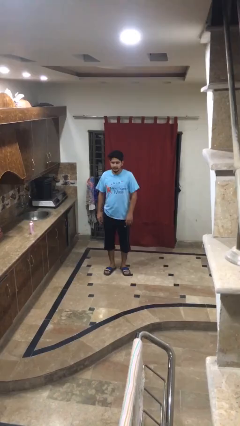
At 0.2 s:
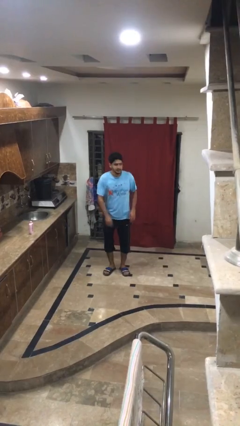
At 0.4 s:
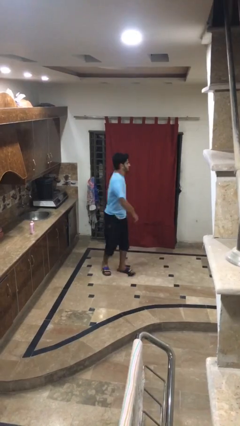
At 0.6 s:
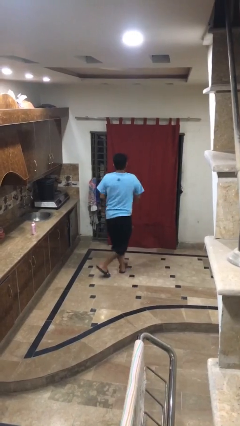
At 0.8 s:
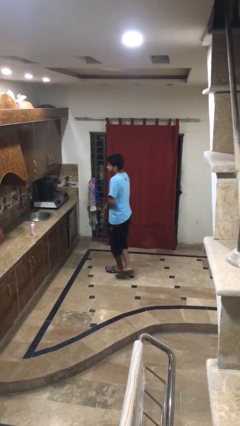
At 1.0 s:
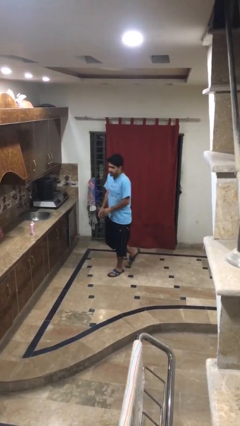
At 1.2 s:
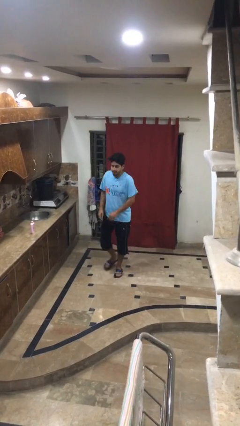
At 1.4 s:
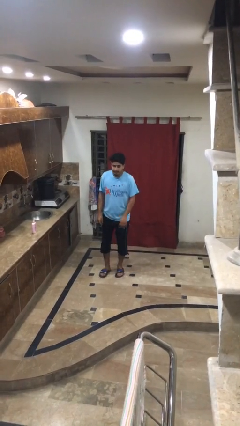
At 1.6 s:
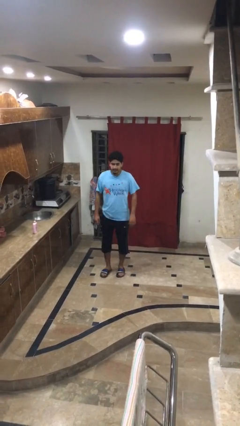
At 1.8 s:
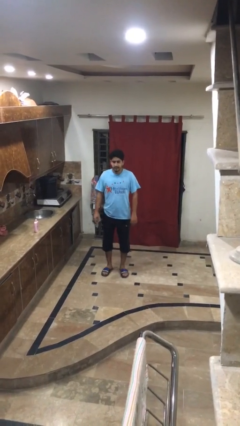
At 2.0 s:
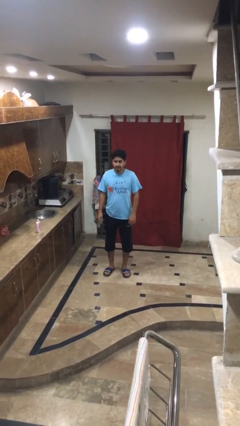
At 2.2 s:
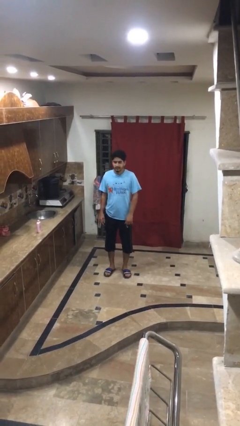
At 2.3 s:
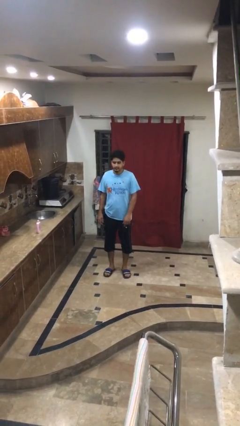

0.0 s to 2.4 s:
person twirls

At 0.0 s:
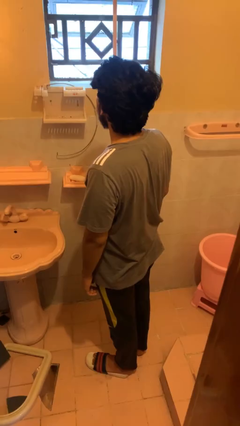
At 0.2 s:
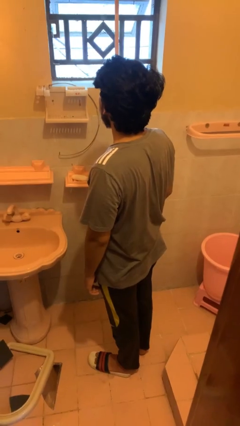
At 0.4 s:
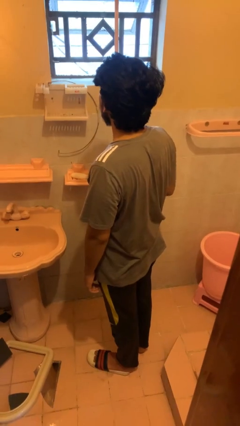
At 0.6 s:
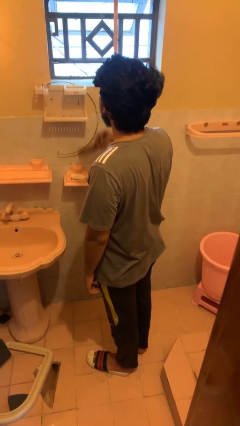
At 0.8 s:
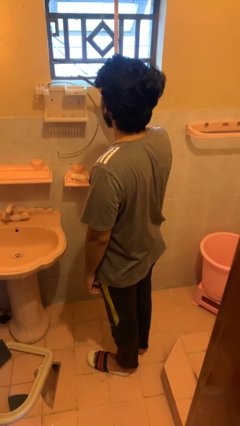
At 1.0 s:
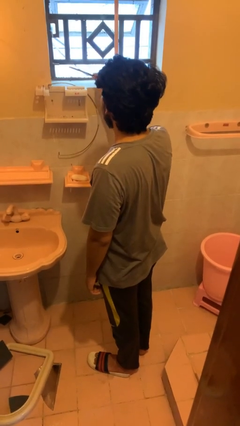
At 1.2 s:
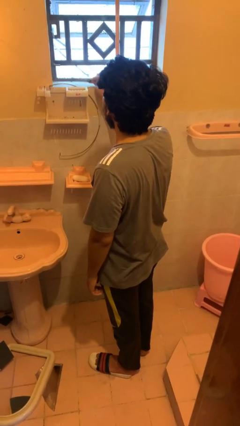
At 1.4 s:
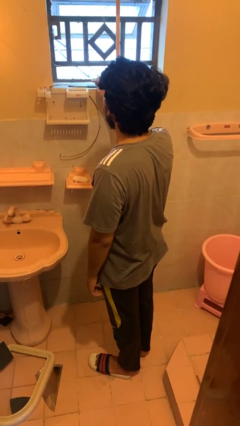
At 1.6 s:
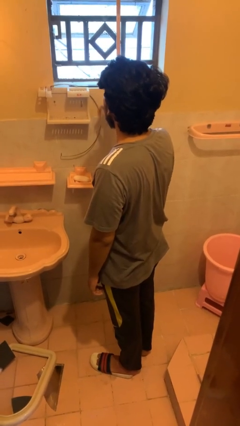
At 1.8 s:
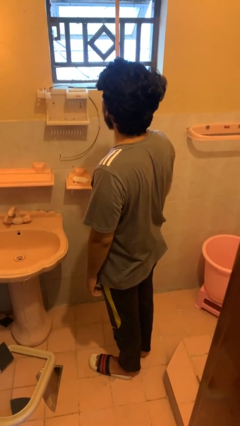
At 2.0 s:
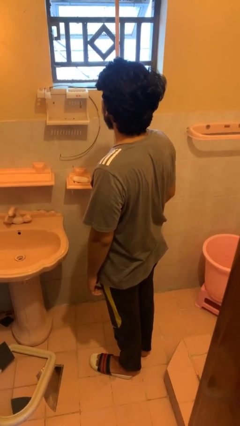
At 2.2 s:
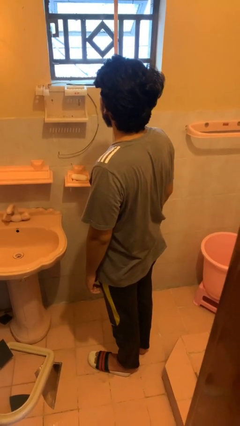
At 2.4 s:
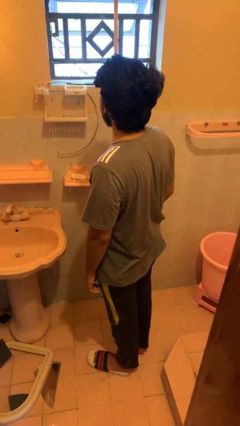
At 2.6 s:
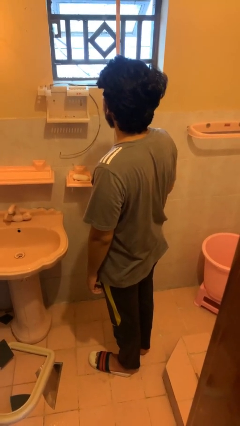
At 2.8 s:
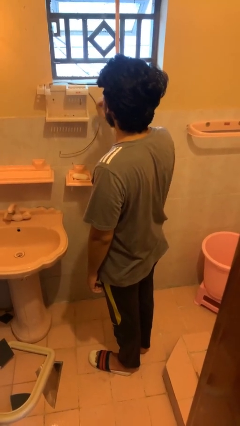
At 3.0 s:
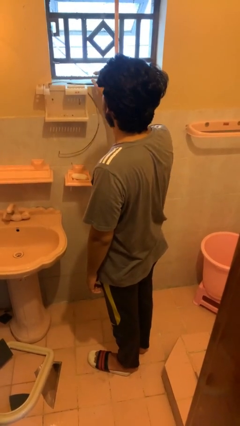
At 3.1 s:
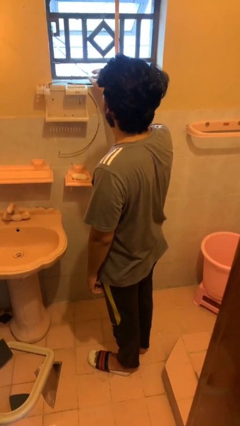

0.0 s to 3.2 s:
person puts down object on countertop

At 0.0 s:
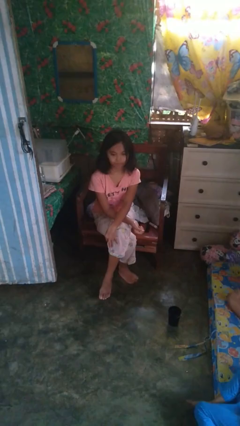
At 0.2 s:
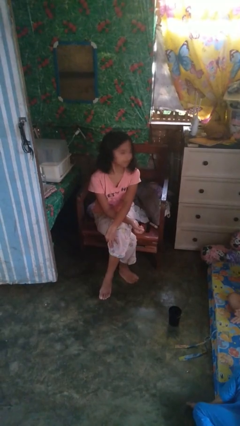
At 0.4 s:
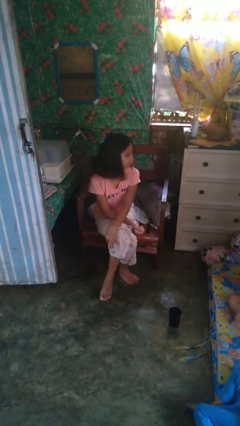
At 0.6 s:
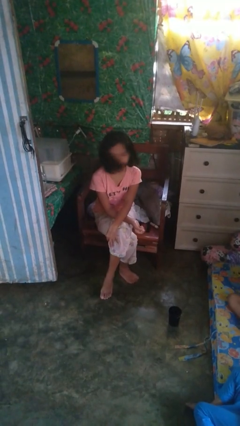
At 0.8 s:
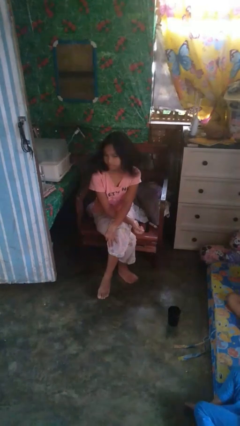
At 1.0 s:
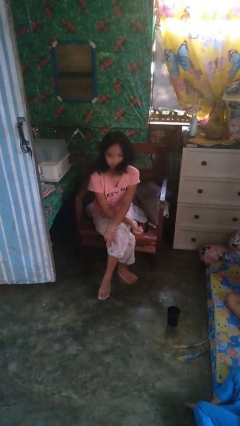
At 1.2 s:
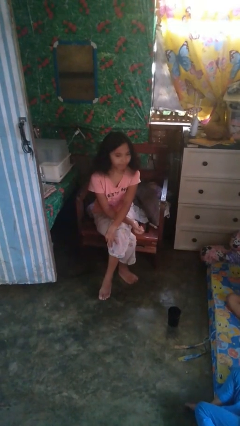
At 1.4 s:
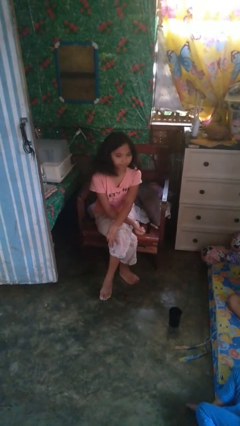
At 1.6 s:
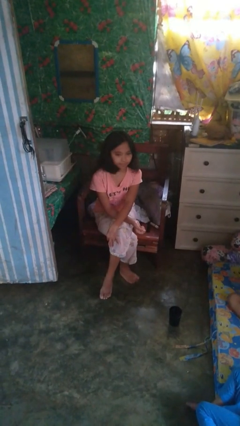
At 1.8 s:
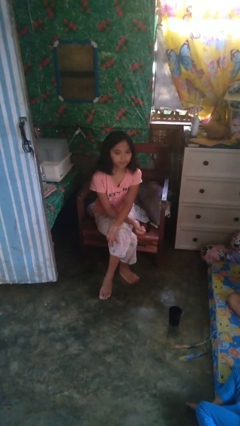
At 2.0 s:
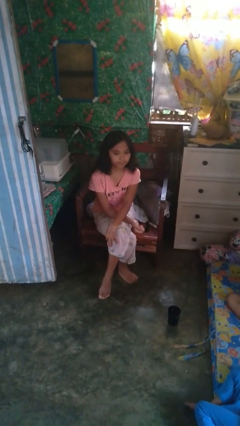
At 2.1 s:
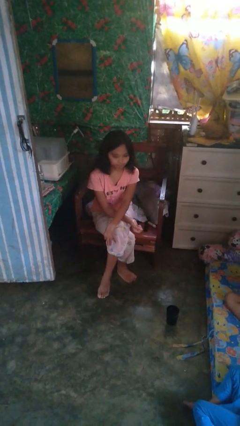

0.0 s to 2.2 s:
person shakes head

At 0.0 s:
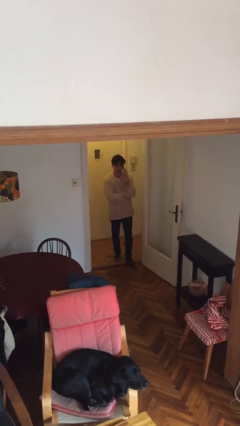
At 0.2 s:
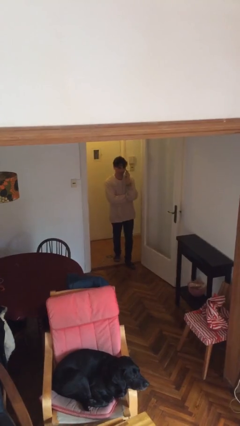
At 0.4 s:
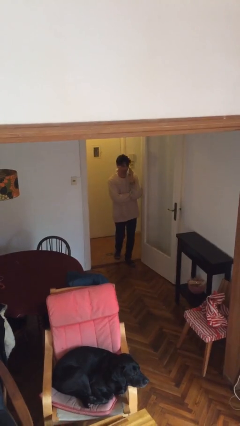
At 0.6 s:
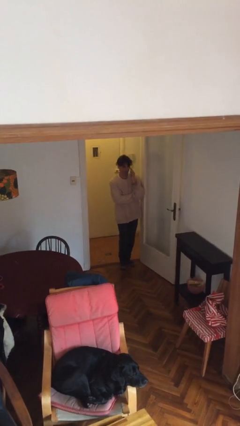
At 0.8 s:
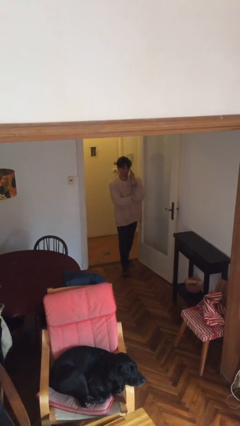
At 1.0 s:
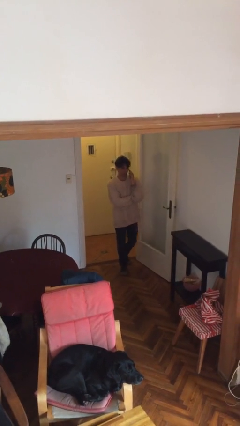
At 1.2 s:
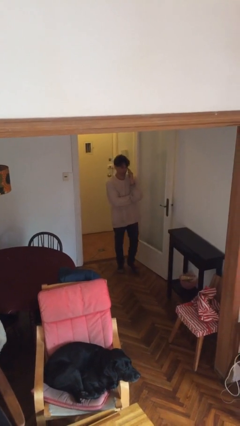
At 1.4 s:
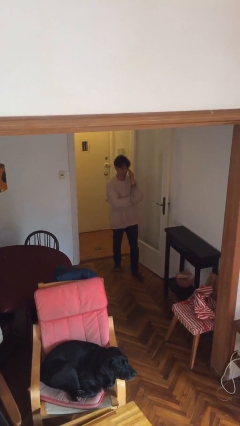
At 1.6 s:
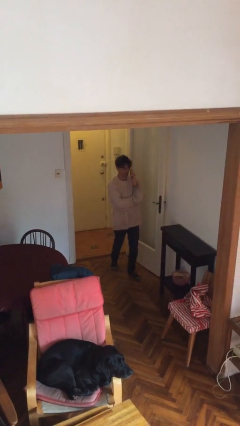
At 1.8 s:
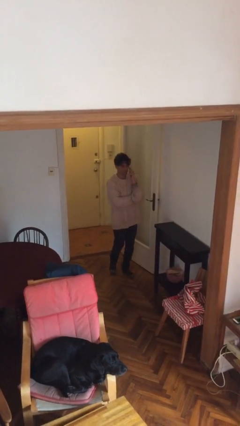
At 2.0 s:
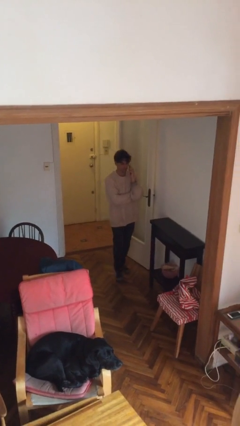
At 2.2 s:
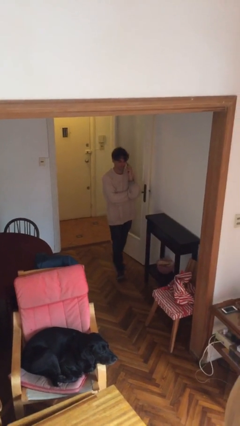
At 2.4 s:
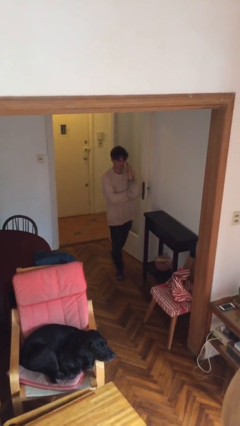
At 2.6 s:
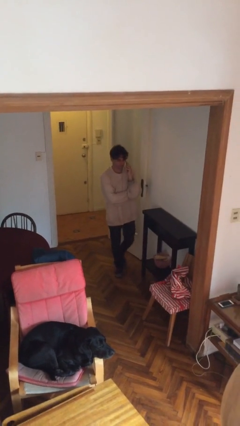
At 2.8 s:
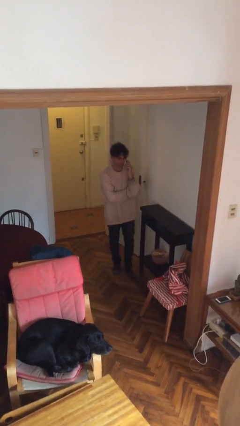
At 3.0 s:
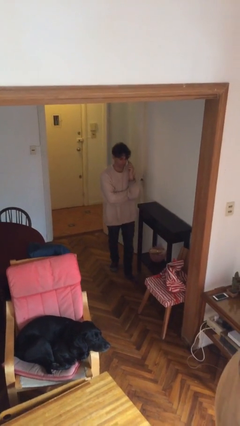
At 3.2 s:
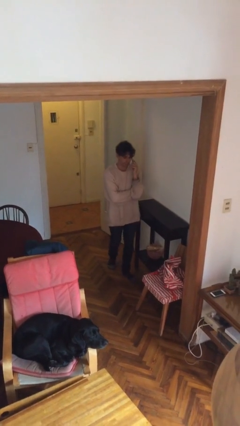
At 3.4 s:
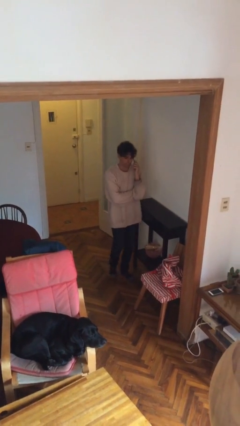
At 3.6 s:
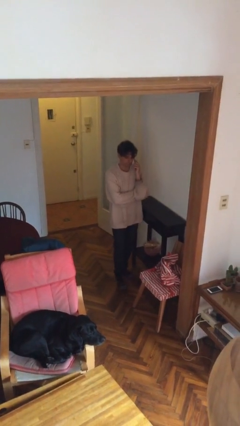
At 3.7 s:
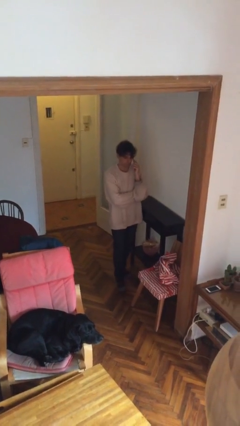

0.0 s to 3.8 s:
person enters scene through structure

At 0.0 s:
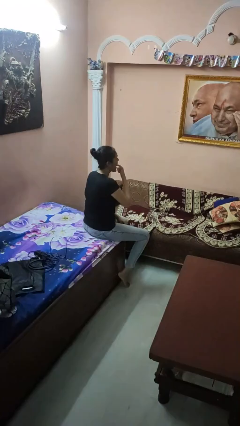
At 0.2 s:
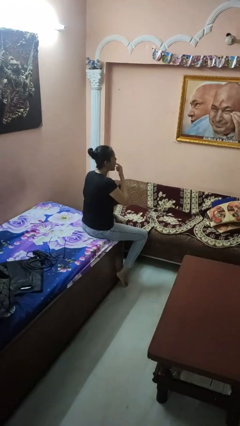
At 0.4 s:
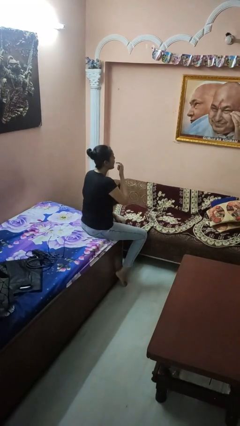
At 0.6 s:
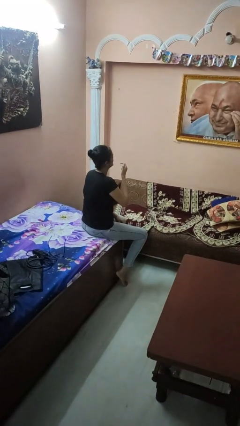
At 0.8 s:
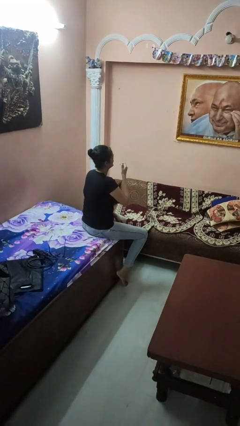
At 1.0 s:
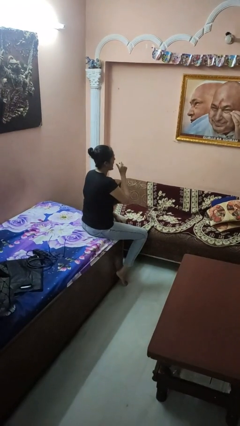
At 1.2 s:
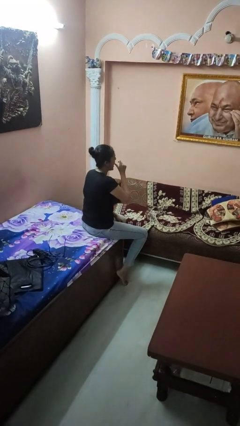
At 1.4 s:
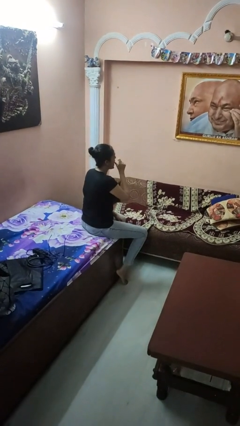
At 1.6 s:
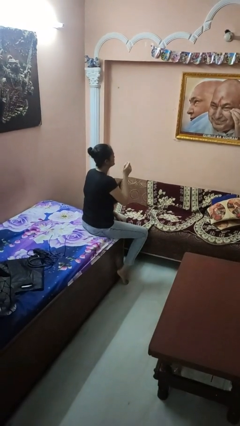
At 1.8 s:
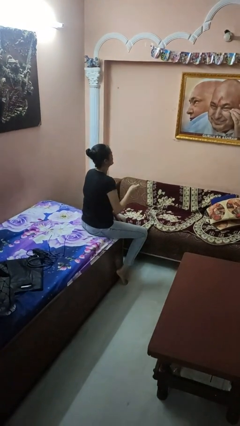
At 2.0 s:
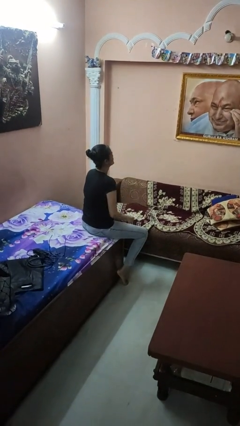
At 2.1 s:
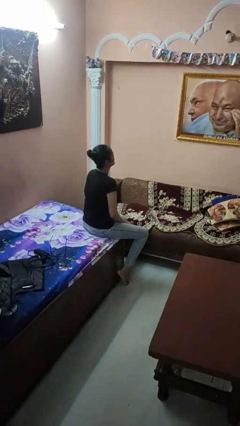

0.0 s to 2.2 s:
person licks fingers

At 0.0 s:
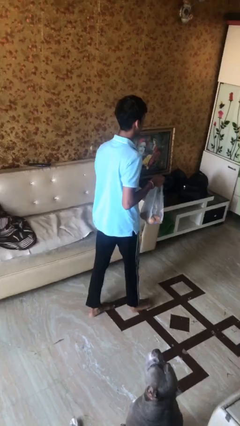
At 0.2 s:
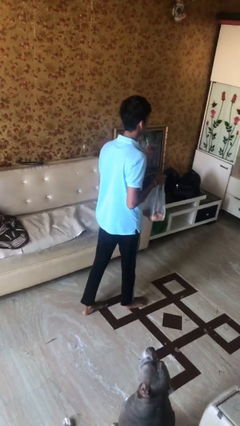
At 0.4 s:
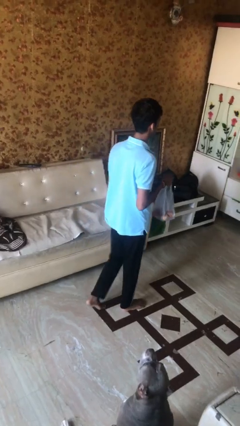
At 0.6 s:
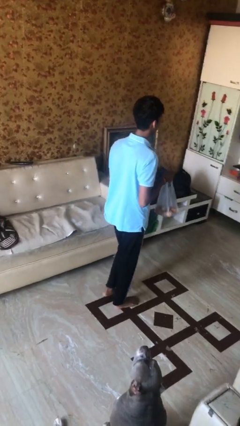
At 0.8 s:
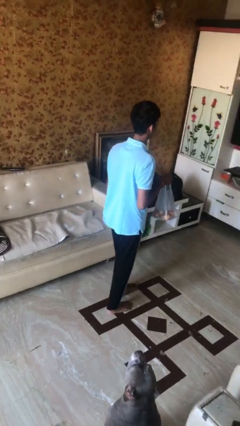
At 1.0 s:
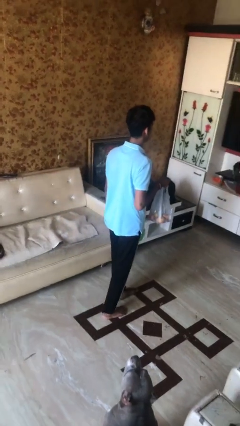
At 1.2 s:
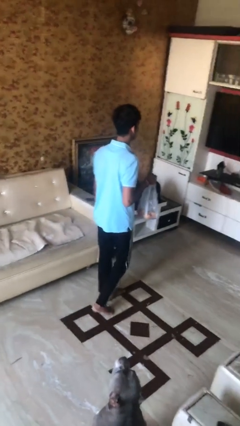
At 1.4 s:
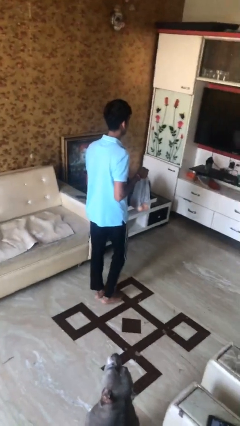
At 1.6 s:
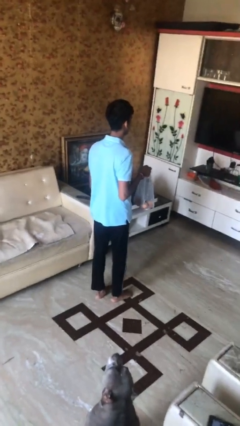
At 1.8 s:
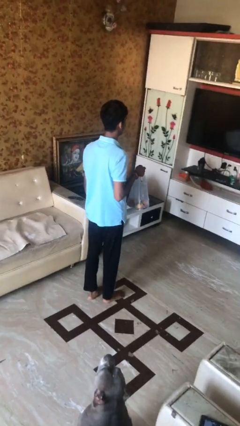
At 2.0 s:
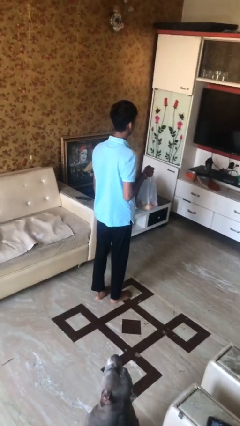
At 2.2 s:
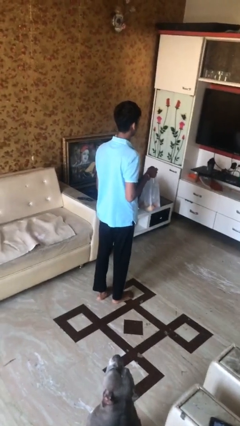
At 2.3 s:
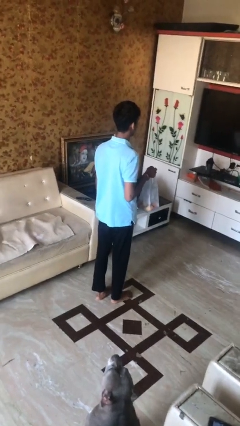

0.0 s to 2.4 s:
person carries groceries

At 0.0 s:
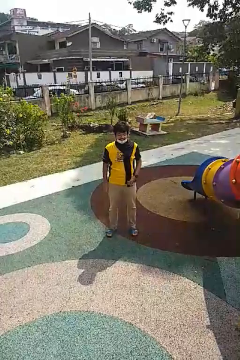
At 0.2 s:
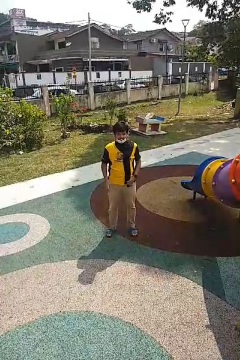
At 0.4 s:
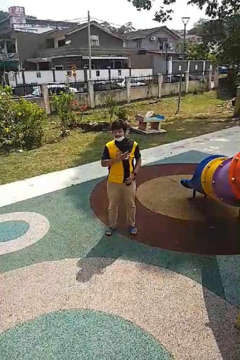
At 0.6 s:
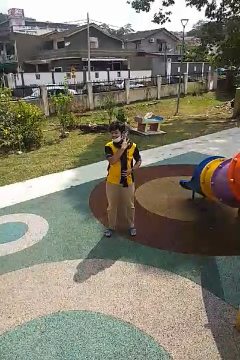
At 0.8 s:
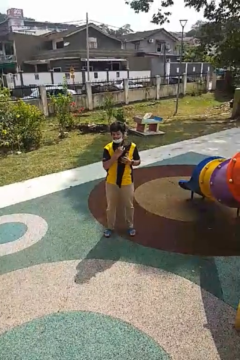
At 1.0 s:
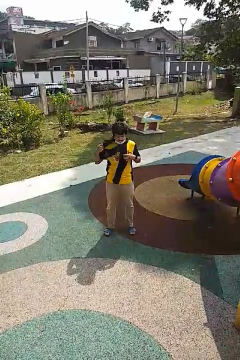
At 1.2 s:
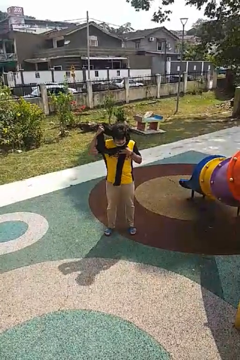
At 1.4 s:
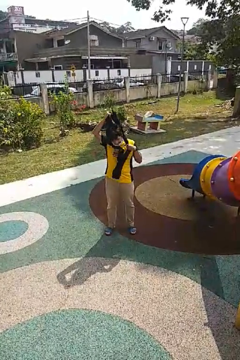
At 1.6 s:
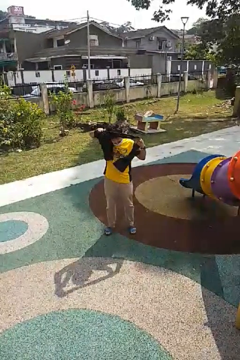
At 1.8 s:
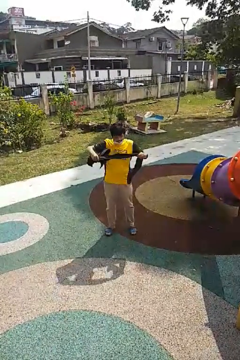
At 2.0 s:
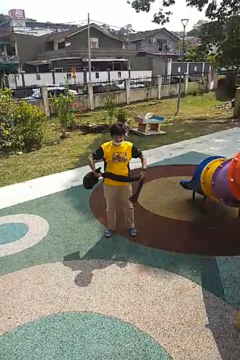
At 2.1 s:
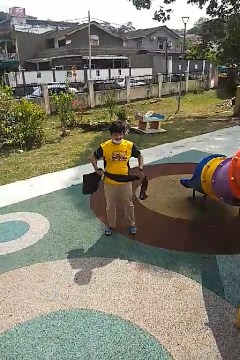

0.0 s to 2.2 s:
person takes off scarf
